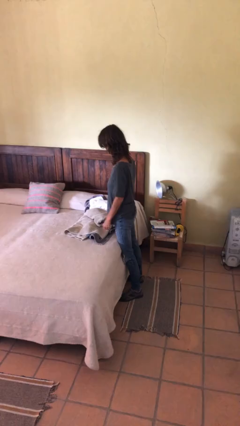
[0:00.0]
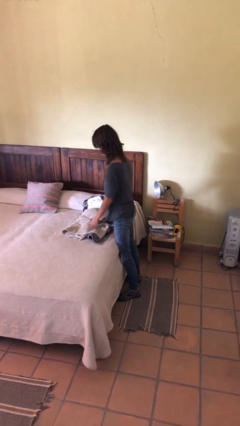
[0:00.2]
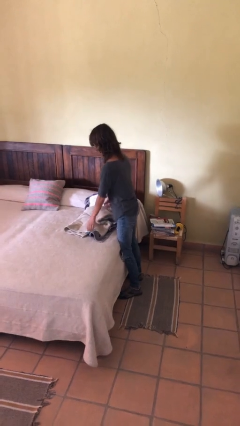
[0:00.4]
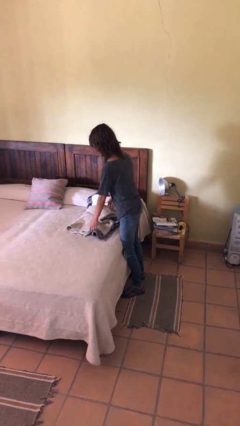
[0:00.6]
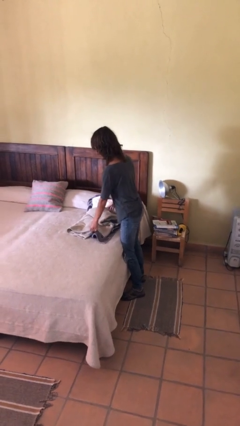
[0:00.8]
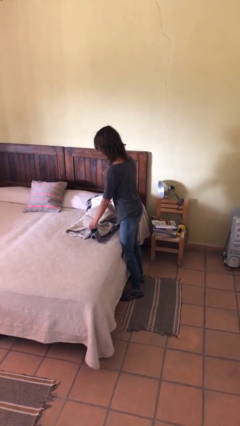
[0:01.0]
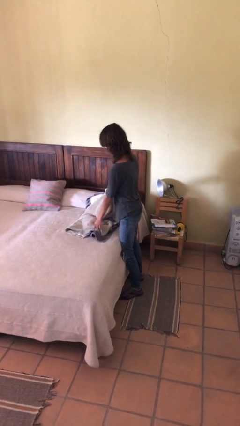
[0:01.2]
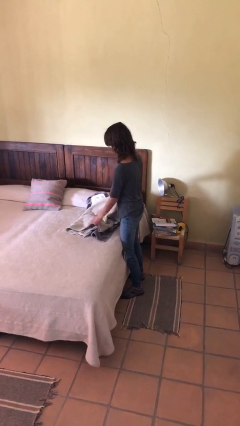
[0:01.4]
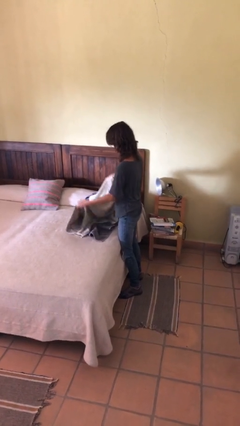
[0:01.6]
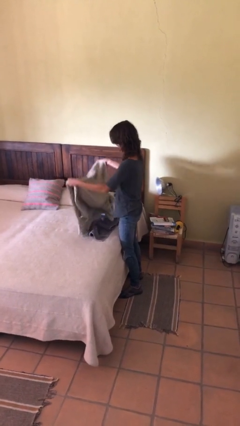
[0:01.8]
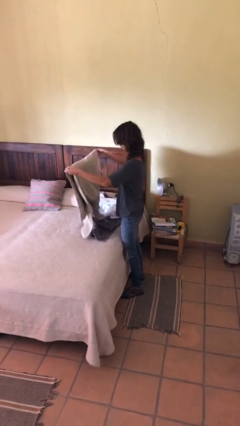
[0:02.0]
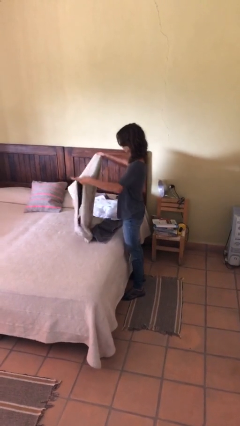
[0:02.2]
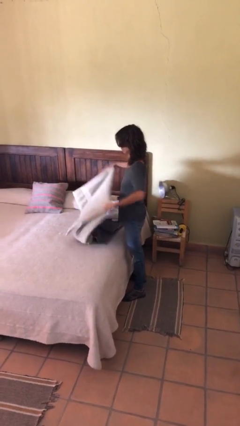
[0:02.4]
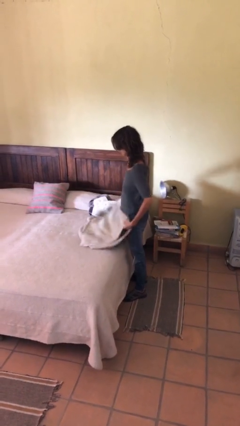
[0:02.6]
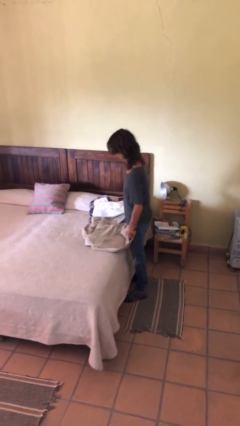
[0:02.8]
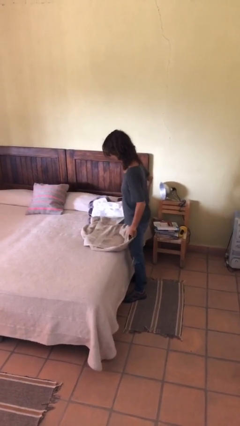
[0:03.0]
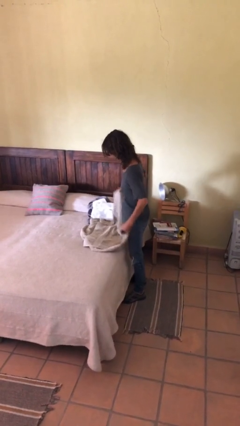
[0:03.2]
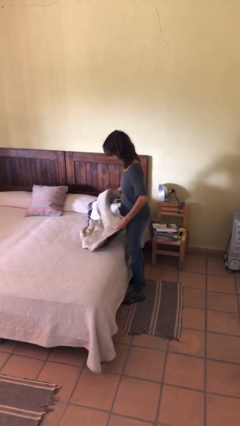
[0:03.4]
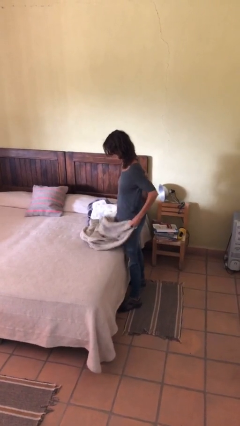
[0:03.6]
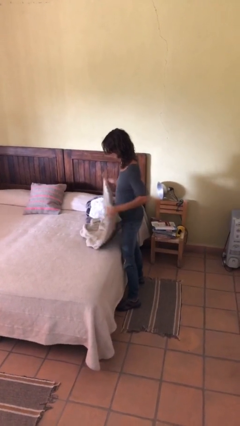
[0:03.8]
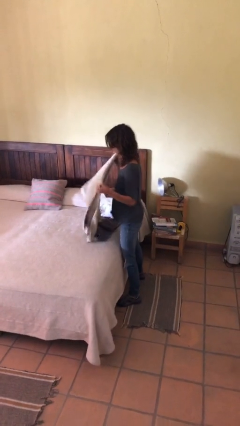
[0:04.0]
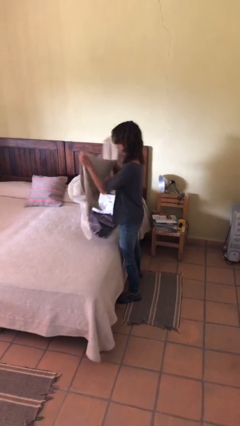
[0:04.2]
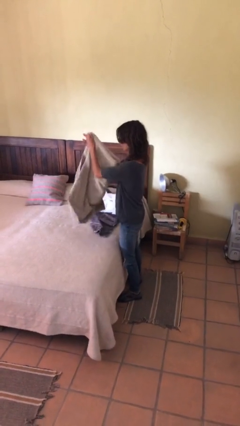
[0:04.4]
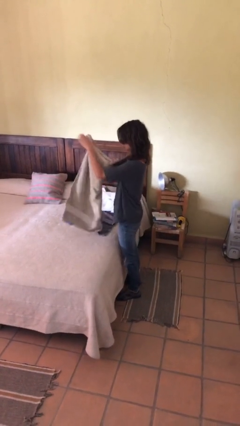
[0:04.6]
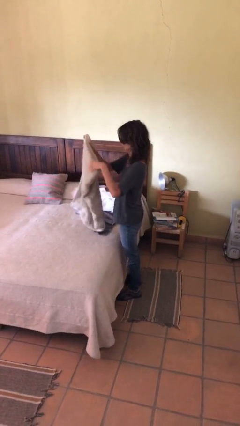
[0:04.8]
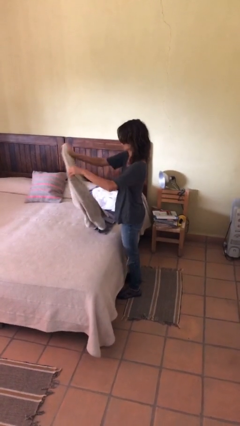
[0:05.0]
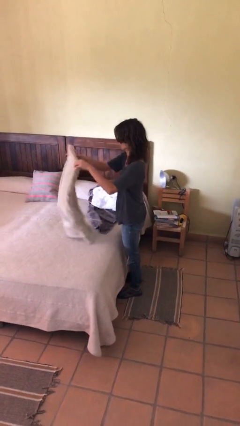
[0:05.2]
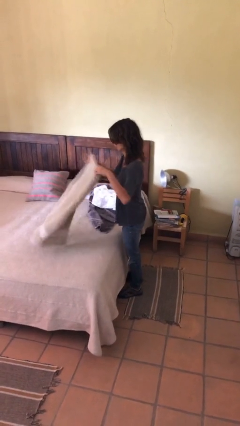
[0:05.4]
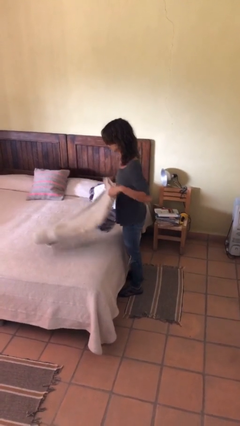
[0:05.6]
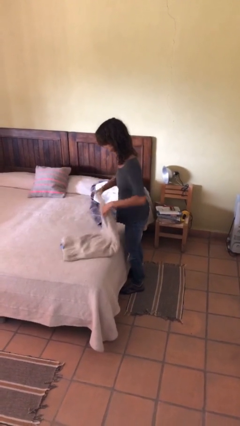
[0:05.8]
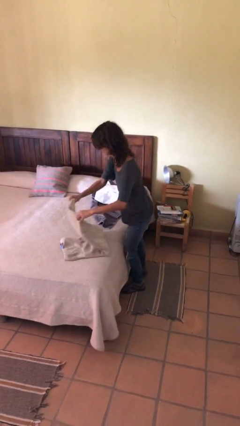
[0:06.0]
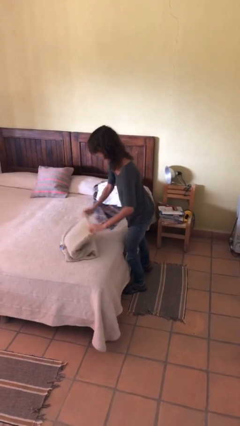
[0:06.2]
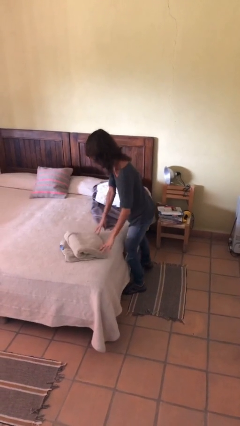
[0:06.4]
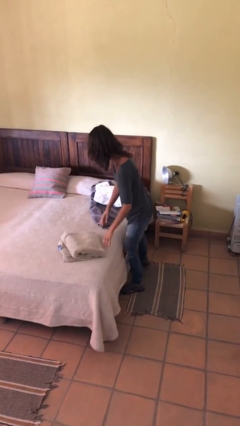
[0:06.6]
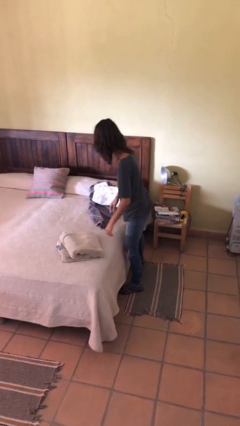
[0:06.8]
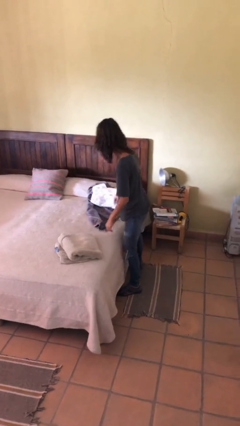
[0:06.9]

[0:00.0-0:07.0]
person folds towel

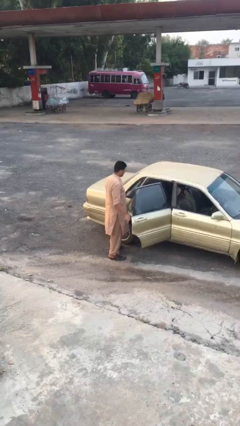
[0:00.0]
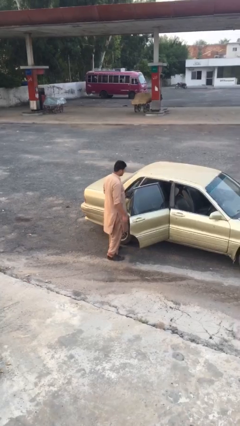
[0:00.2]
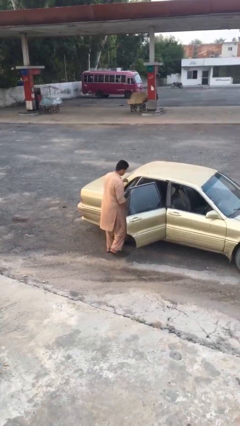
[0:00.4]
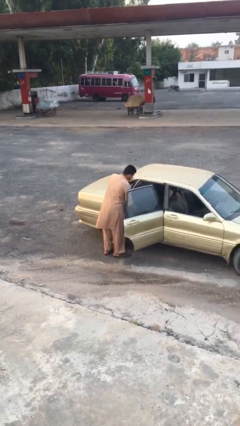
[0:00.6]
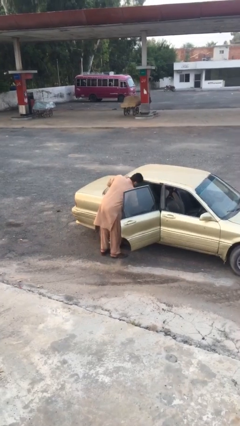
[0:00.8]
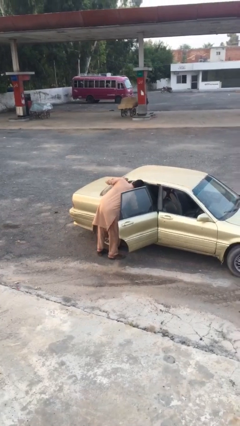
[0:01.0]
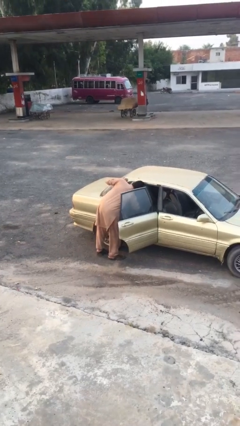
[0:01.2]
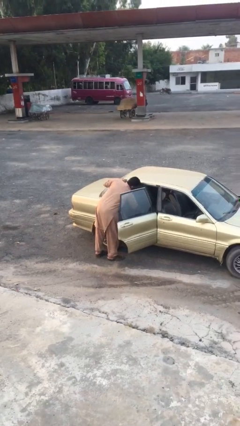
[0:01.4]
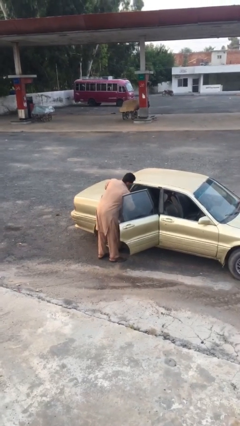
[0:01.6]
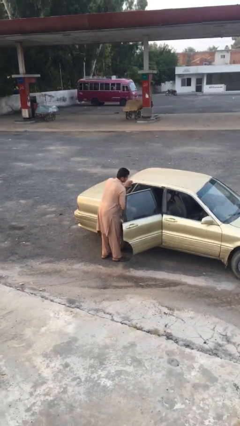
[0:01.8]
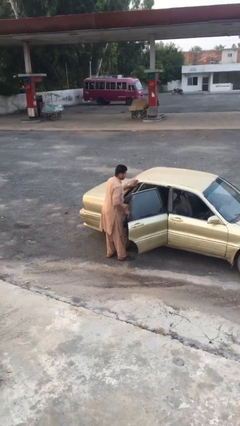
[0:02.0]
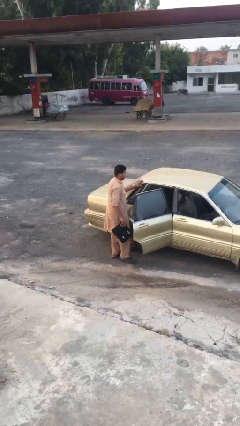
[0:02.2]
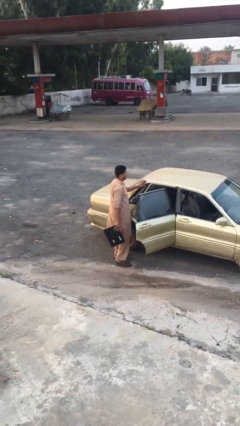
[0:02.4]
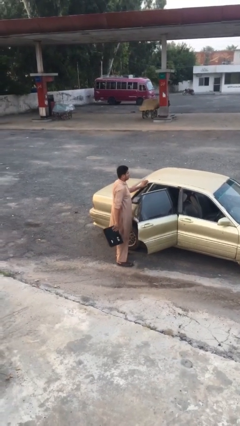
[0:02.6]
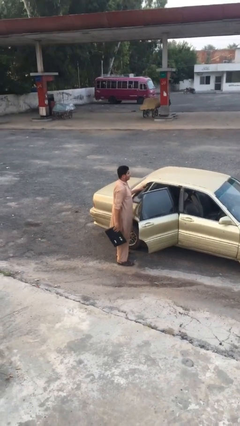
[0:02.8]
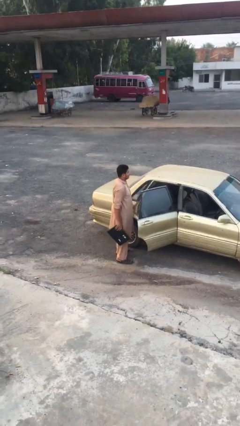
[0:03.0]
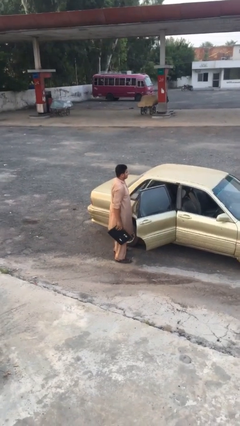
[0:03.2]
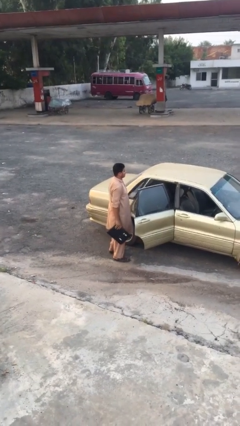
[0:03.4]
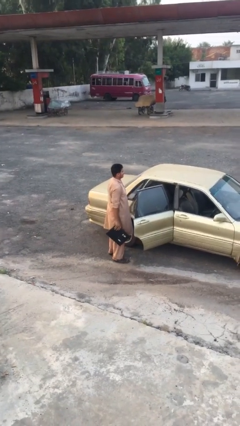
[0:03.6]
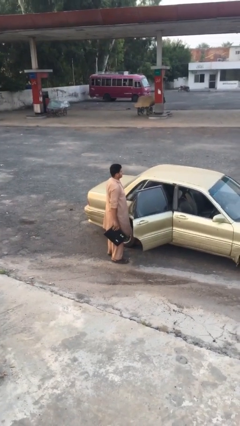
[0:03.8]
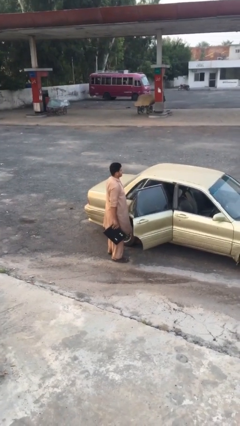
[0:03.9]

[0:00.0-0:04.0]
person unloads car

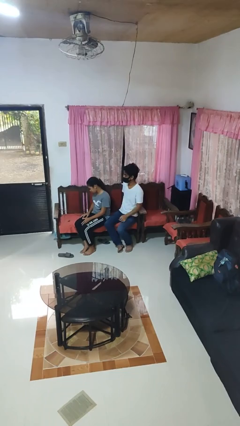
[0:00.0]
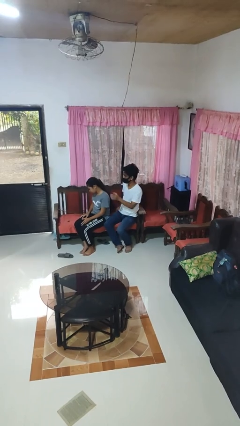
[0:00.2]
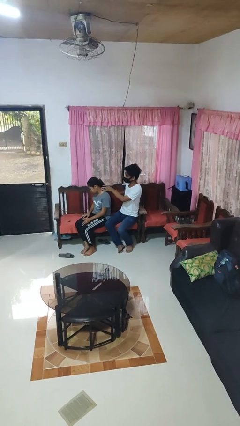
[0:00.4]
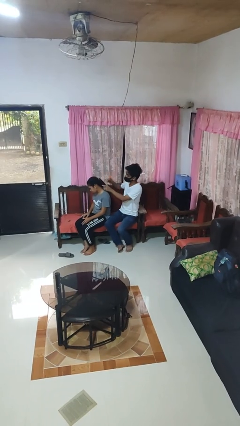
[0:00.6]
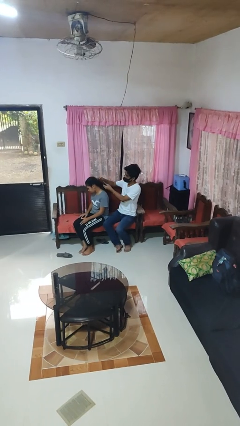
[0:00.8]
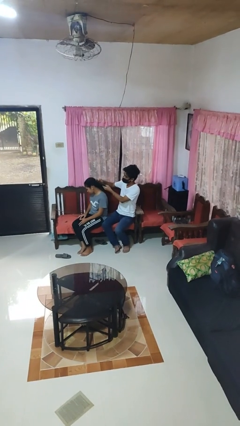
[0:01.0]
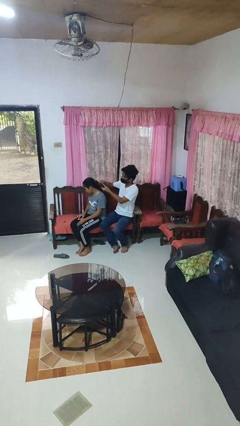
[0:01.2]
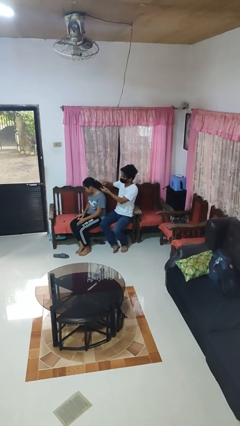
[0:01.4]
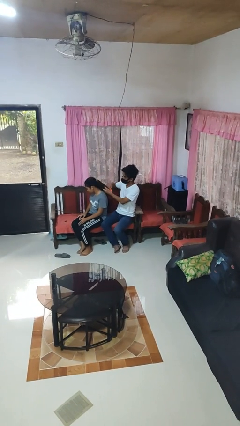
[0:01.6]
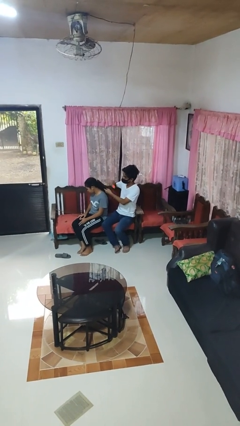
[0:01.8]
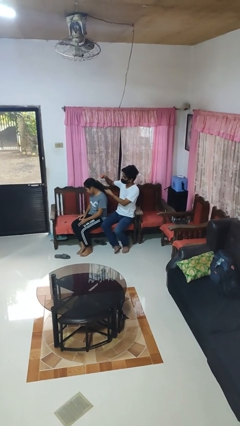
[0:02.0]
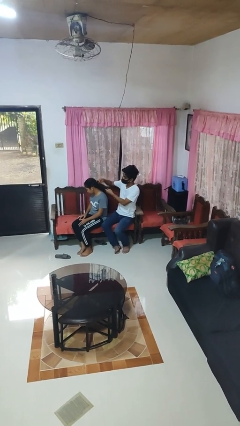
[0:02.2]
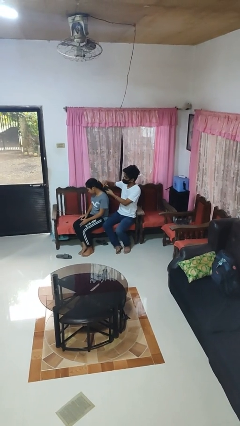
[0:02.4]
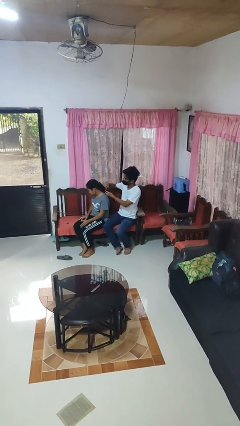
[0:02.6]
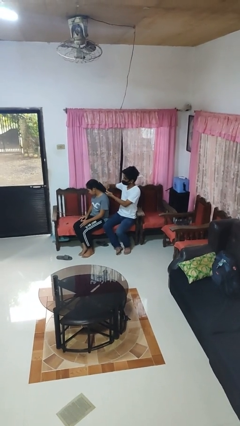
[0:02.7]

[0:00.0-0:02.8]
person brushes hair of person

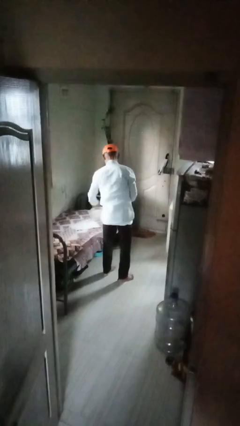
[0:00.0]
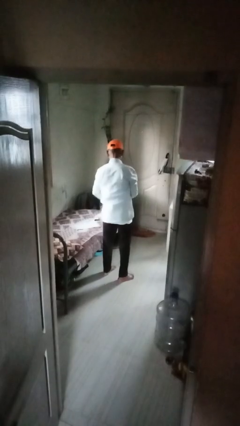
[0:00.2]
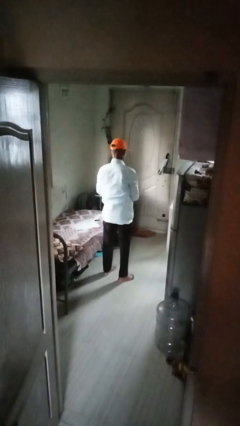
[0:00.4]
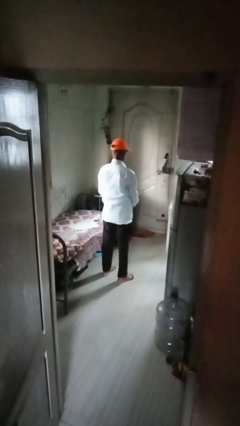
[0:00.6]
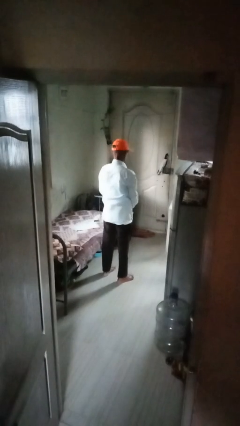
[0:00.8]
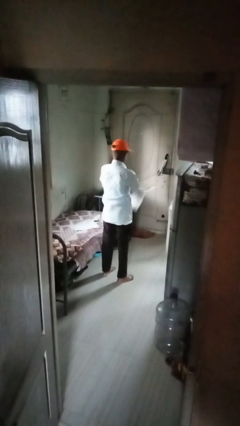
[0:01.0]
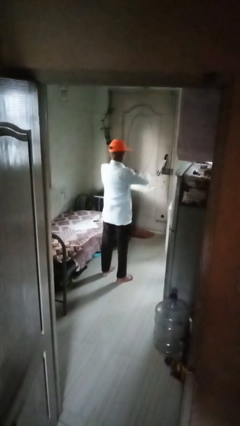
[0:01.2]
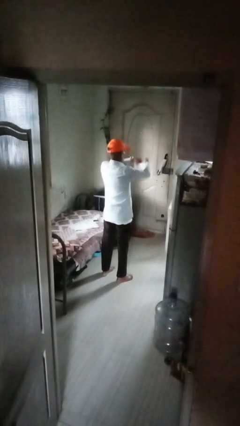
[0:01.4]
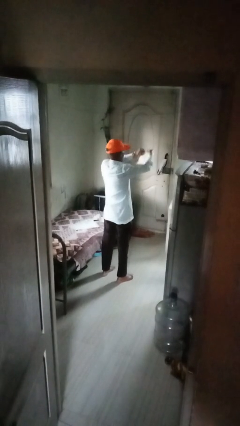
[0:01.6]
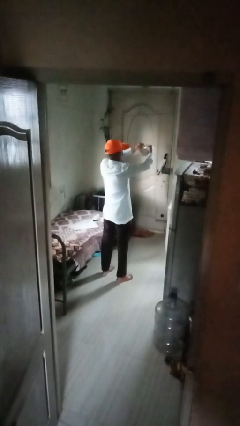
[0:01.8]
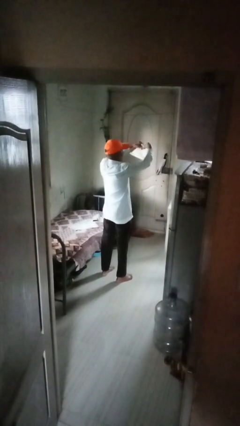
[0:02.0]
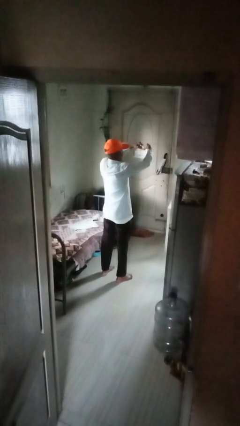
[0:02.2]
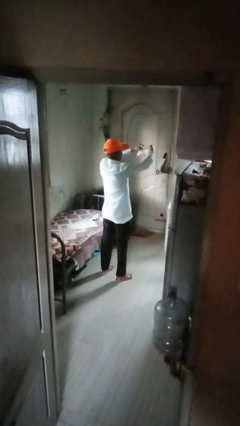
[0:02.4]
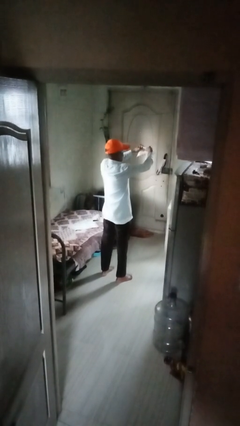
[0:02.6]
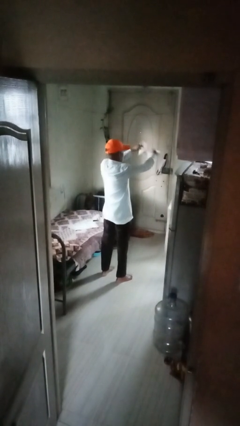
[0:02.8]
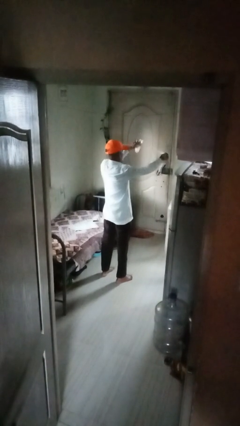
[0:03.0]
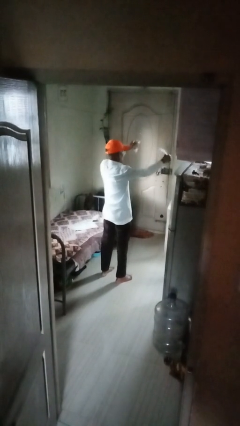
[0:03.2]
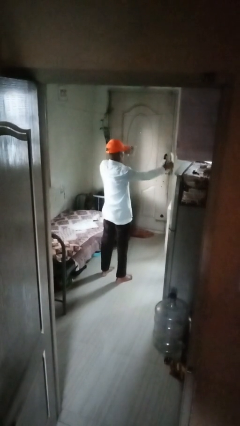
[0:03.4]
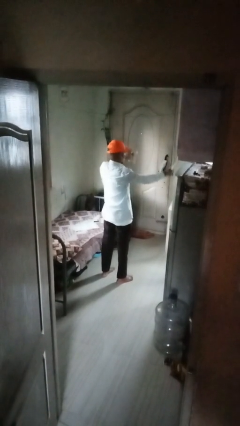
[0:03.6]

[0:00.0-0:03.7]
person tears paper

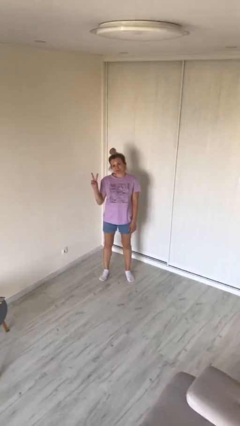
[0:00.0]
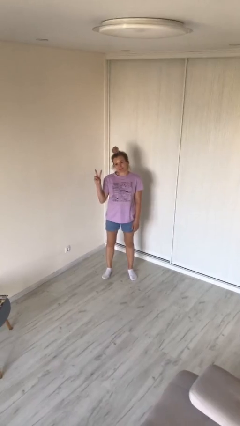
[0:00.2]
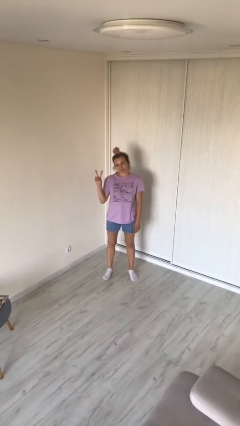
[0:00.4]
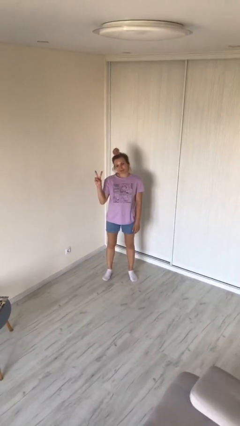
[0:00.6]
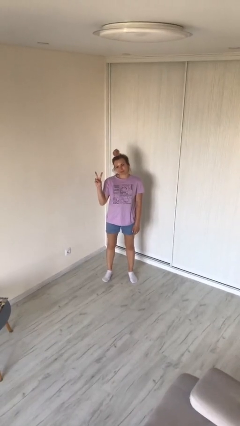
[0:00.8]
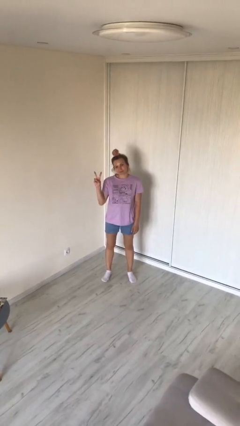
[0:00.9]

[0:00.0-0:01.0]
person gestures peace
